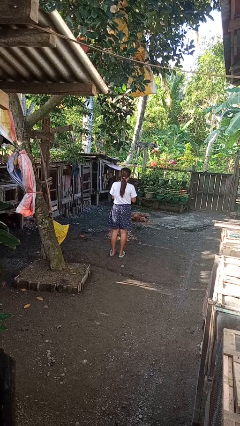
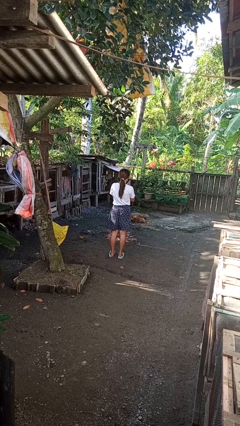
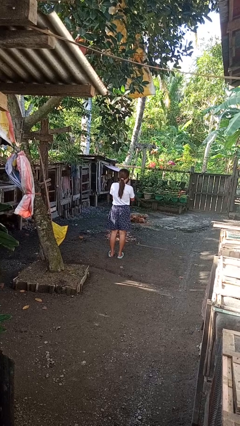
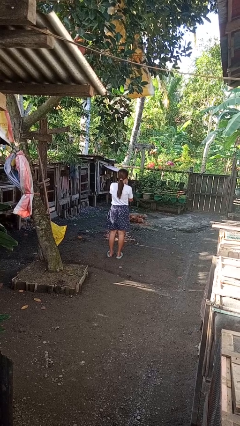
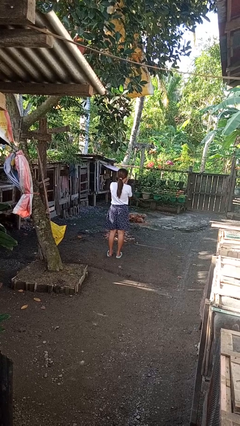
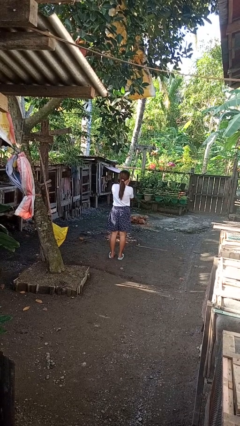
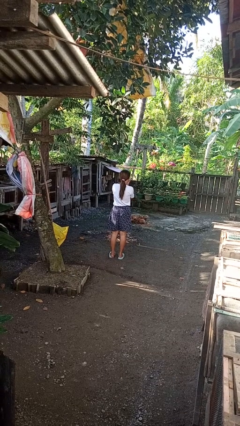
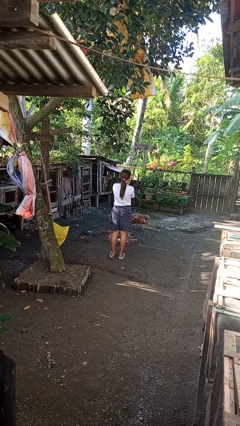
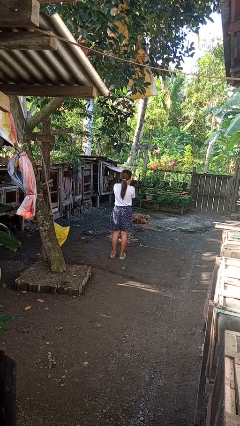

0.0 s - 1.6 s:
person blows into hands

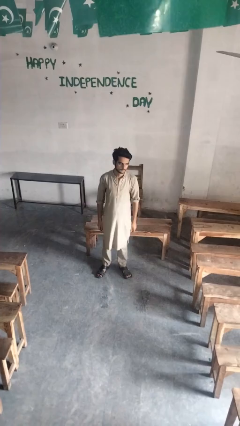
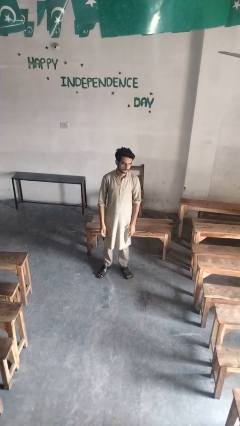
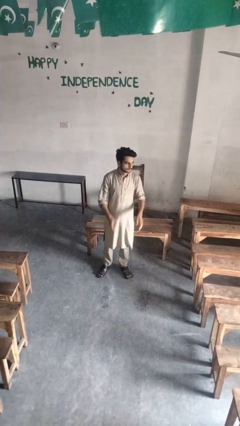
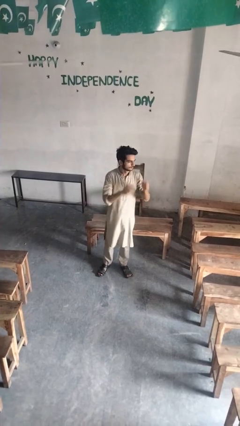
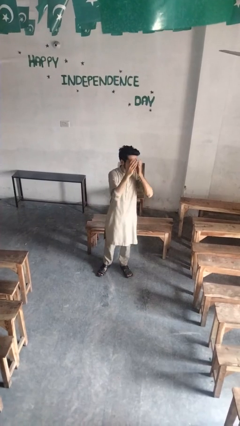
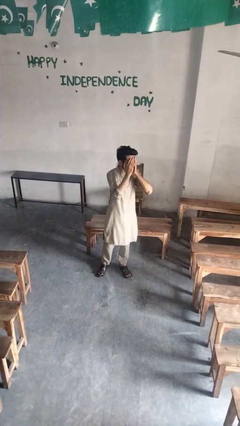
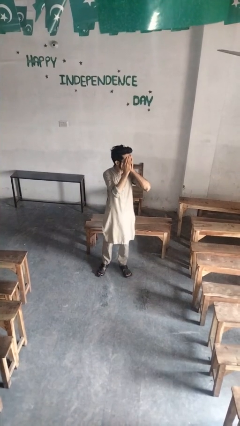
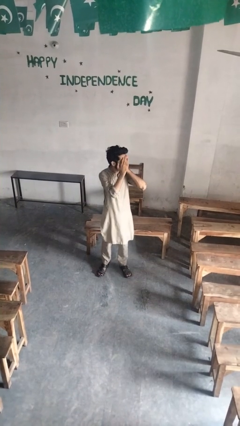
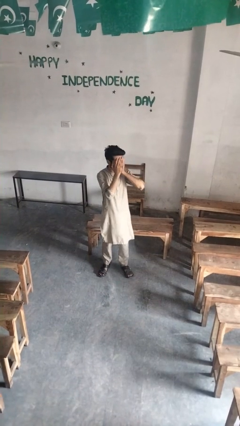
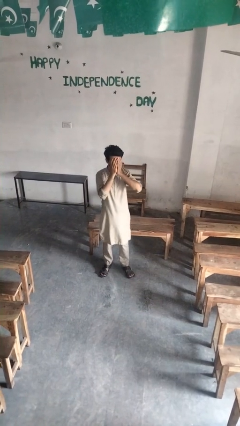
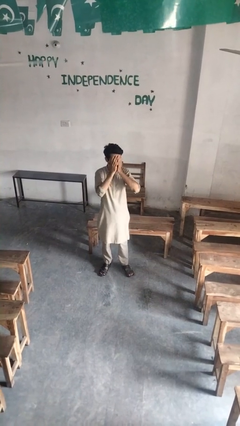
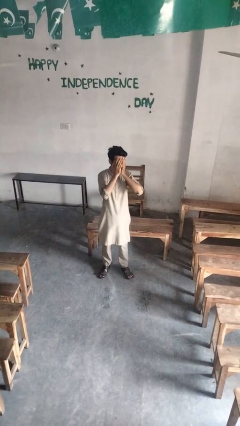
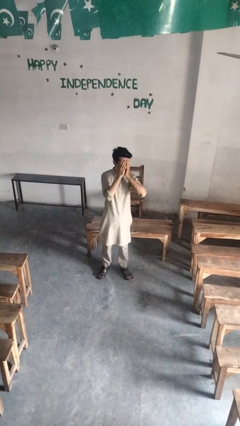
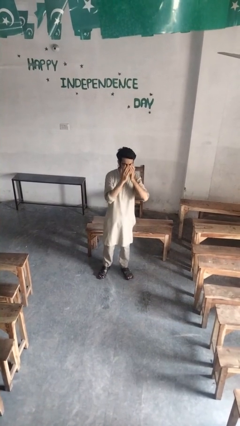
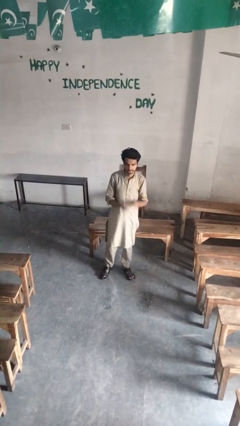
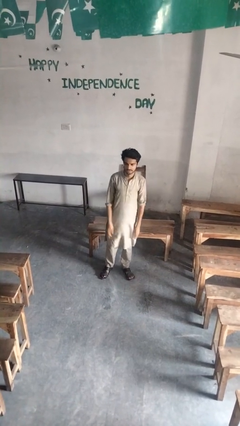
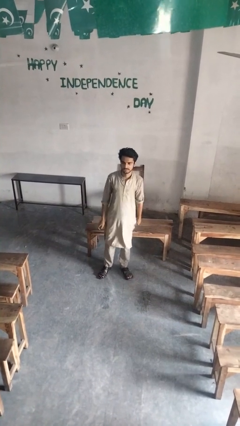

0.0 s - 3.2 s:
person covers face with hands

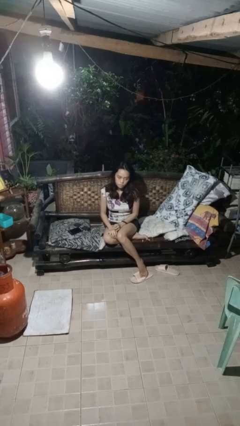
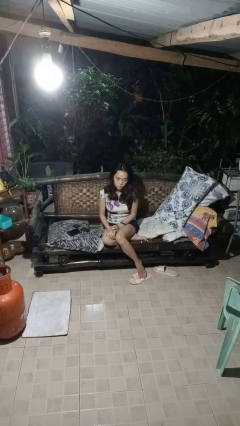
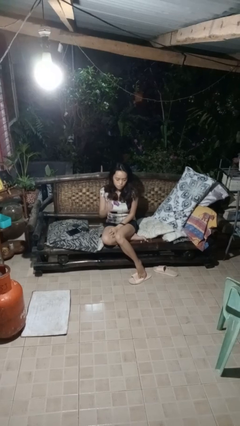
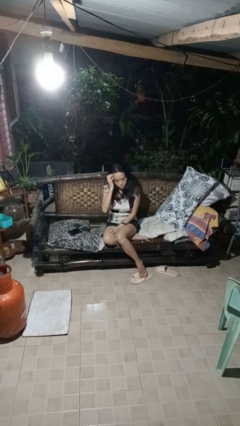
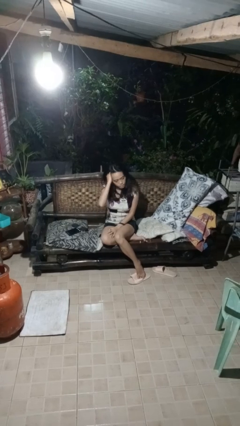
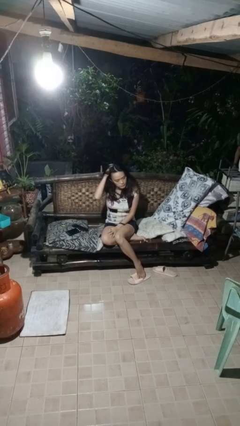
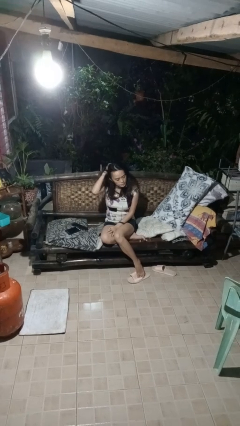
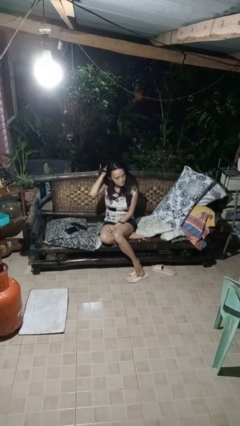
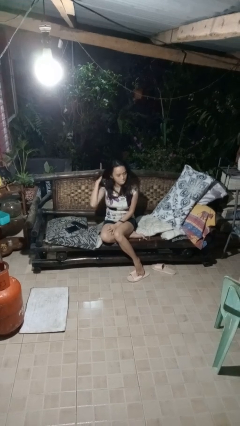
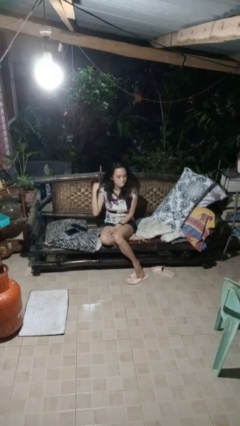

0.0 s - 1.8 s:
person searches in couch

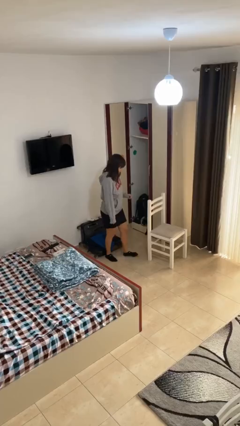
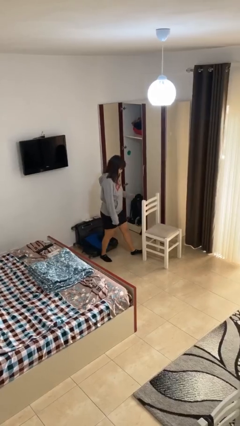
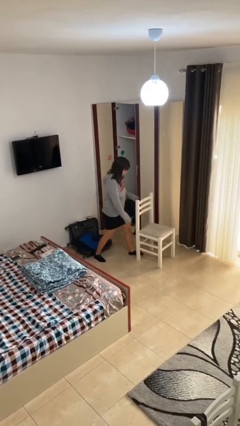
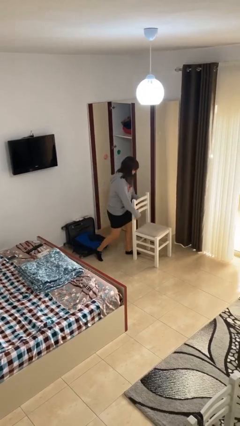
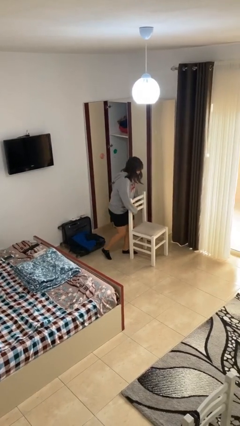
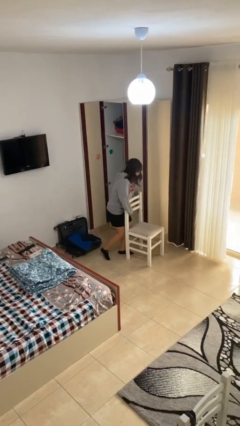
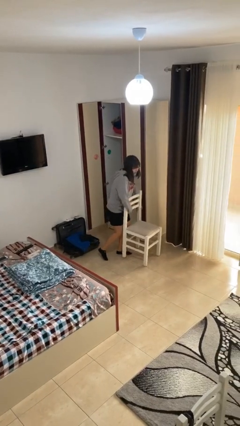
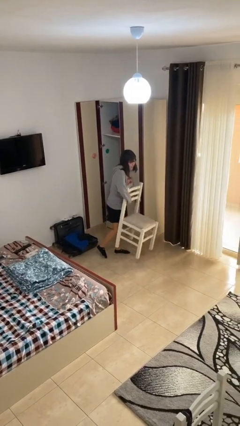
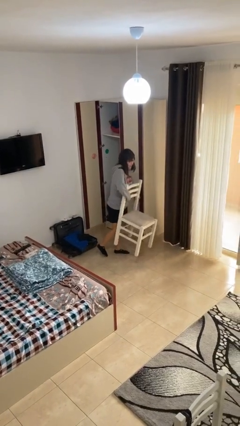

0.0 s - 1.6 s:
person picks up object from floor

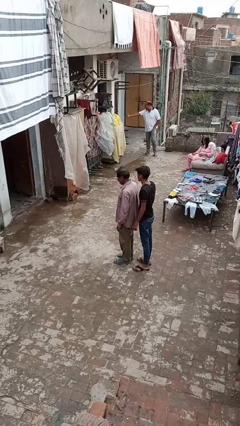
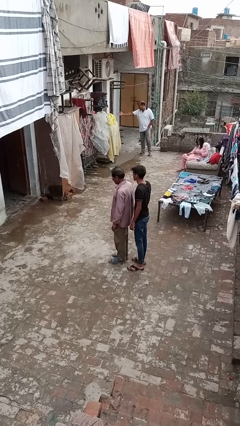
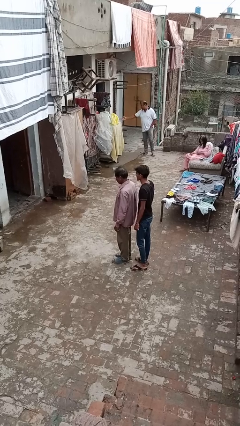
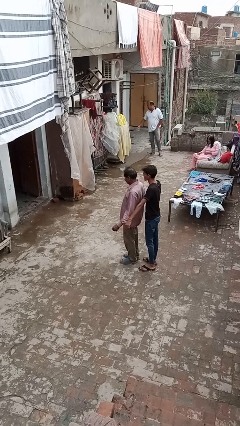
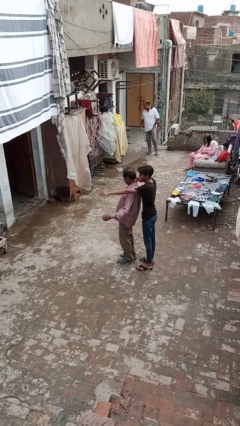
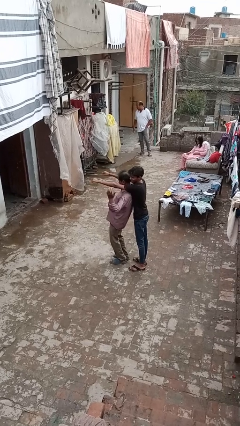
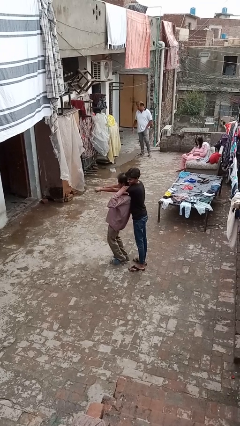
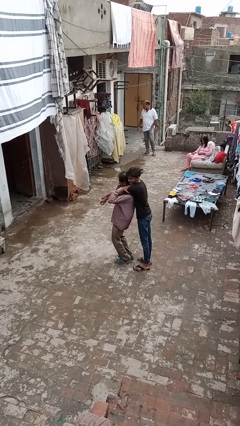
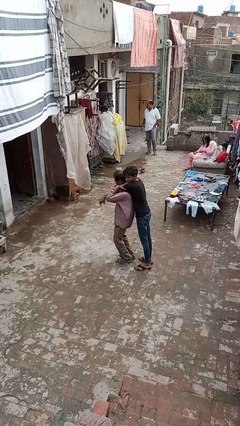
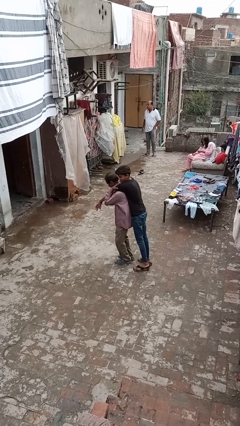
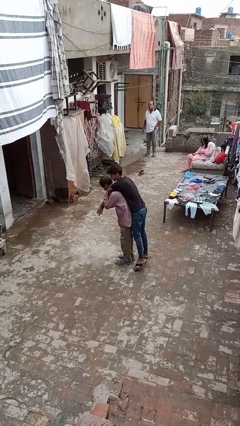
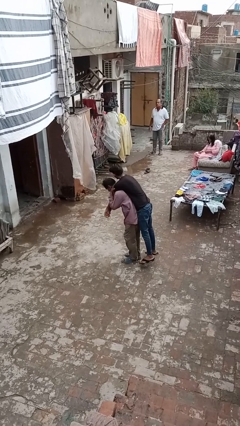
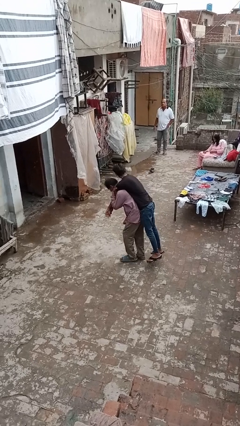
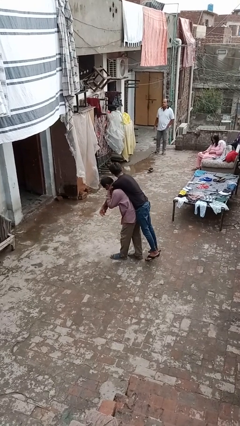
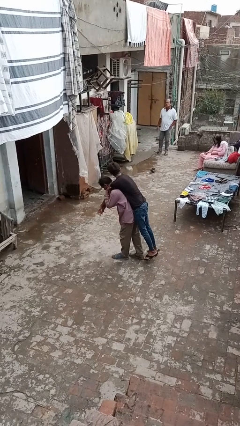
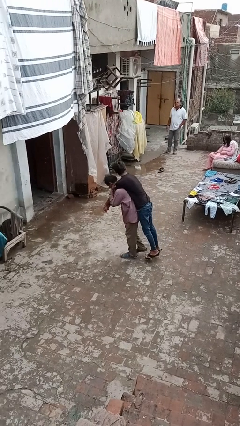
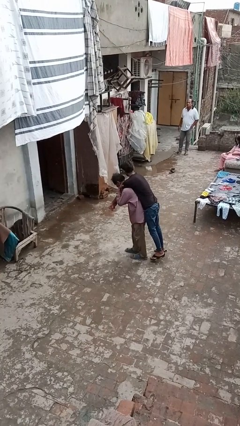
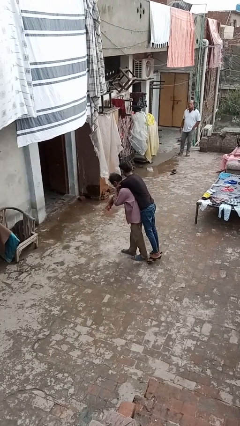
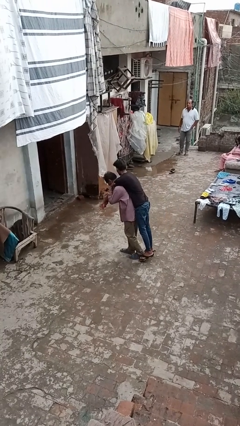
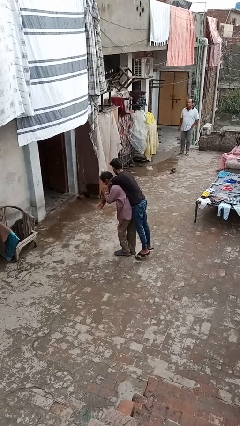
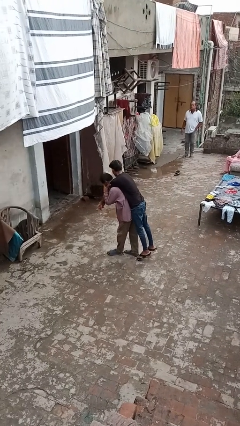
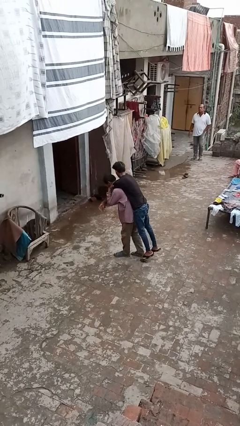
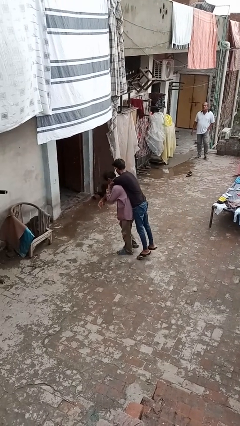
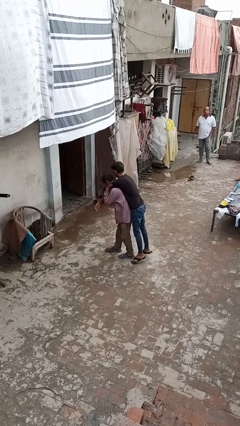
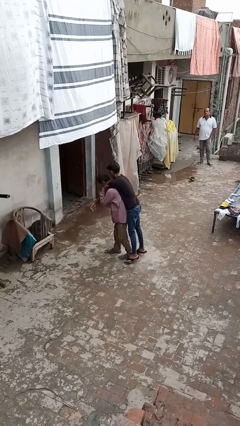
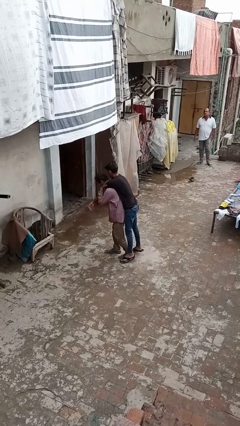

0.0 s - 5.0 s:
person carries person on back

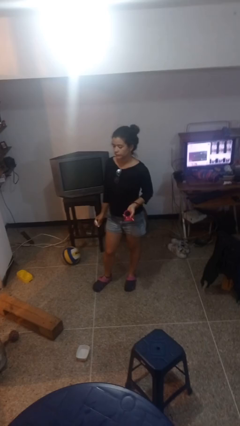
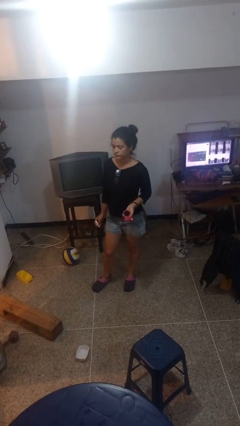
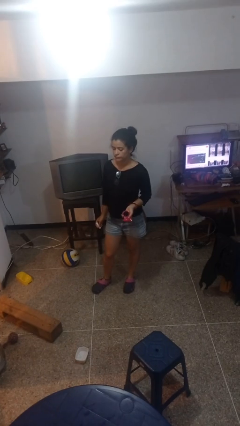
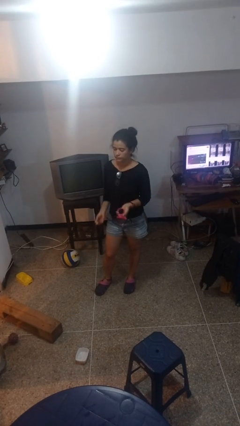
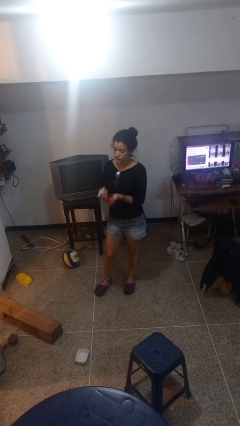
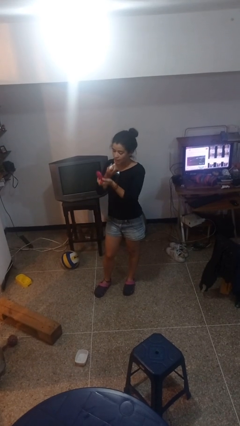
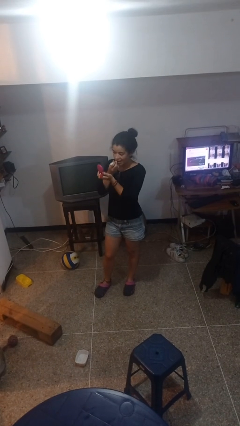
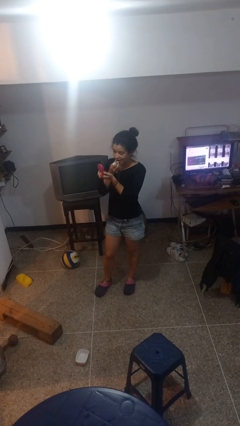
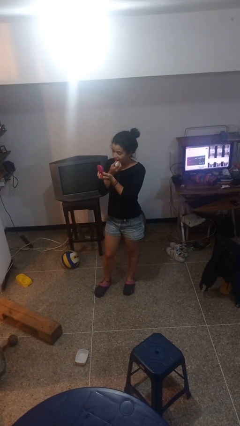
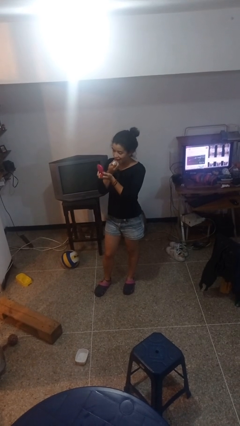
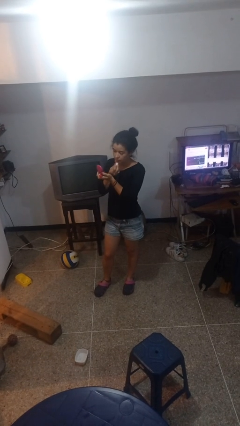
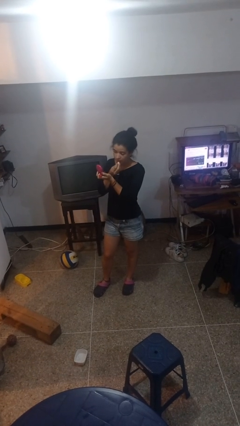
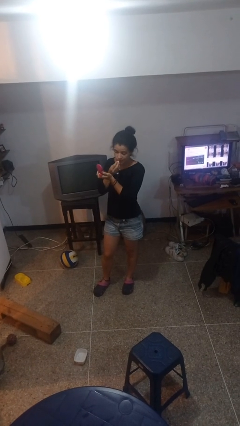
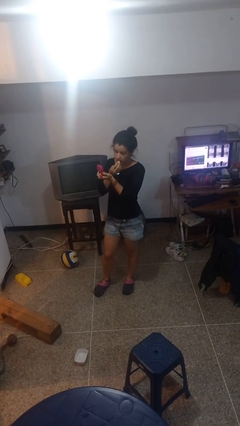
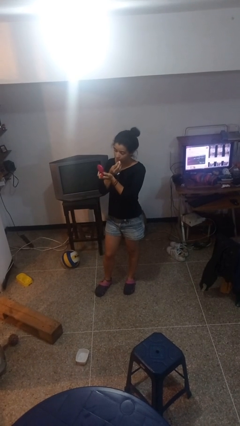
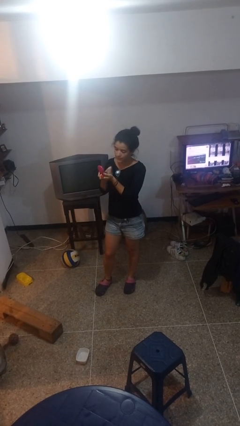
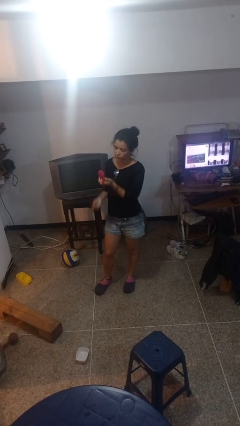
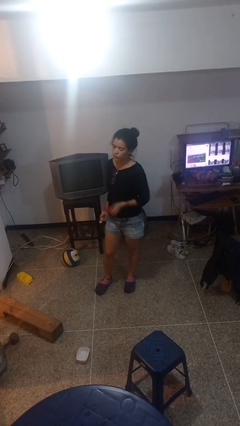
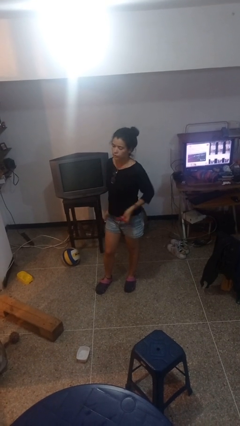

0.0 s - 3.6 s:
person applies lip makeup

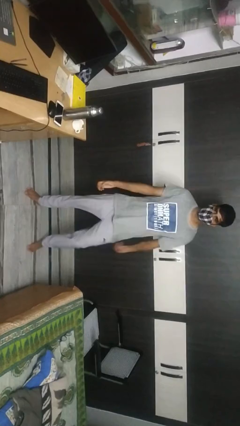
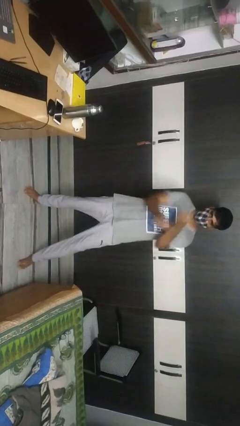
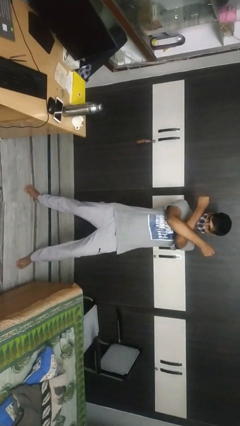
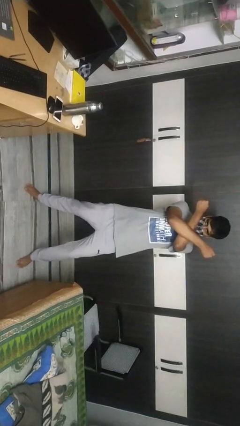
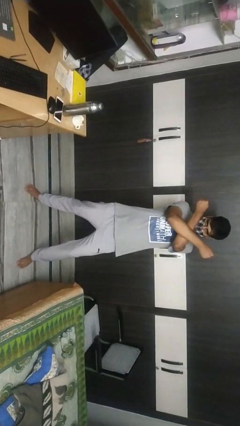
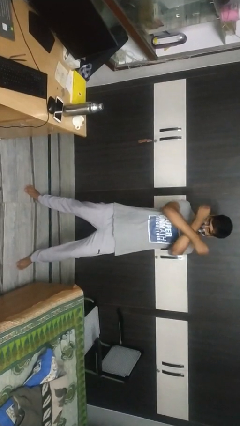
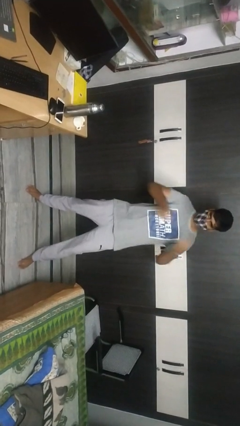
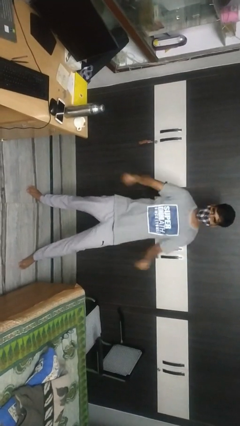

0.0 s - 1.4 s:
person gestures arms x
